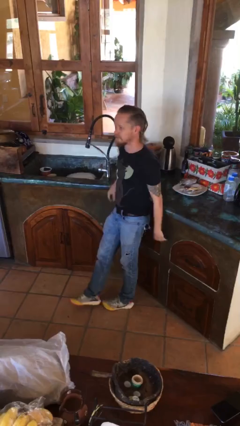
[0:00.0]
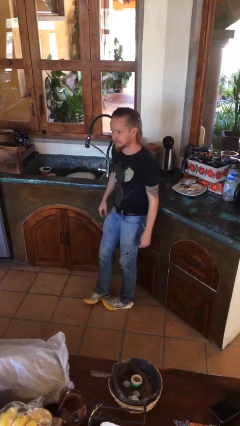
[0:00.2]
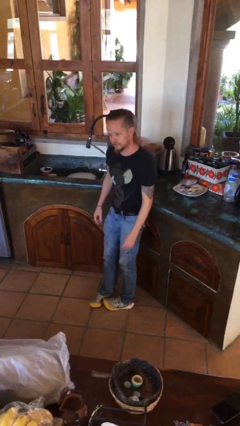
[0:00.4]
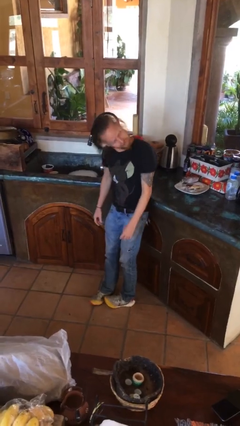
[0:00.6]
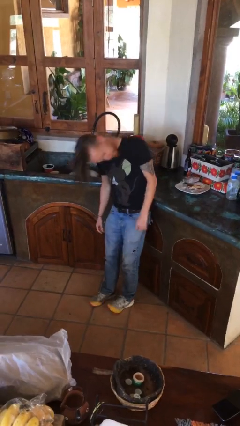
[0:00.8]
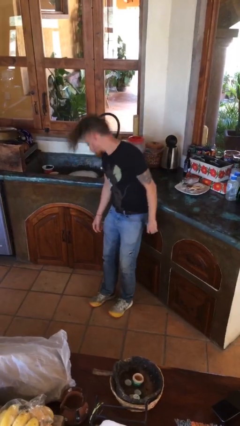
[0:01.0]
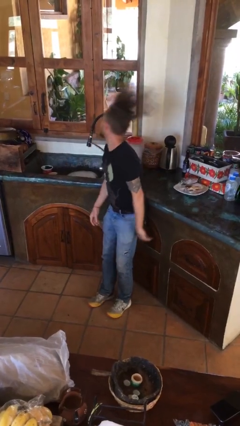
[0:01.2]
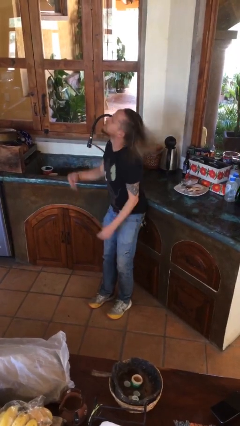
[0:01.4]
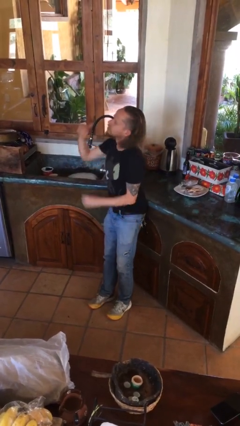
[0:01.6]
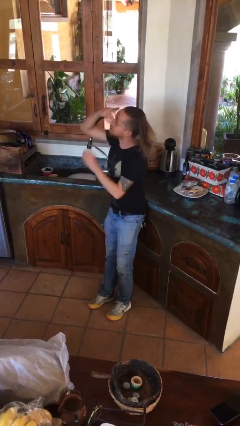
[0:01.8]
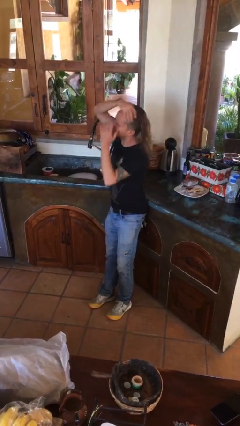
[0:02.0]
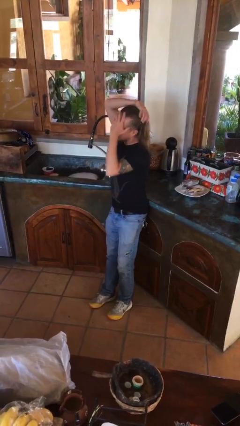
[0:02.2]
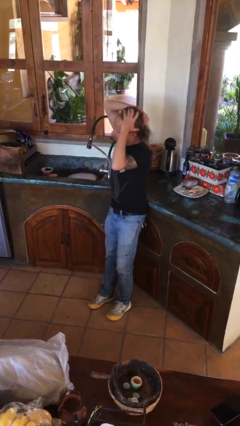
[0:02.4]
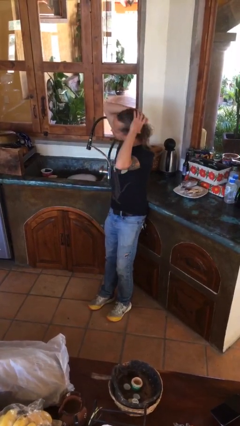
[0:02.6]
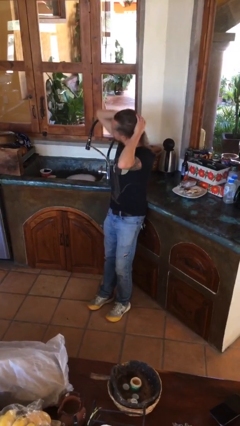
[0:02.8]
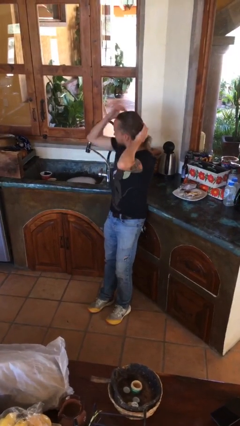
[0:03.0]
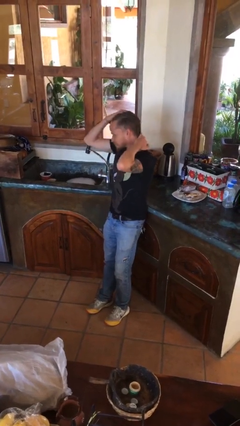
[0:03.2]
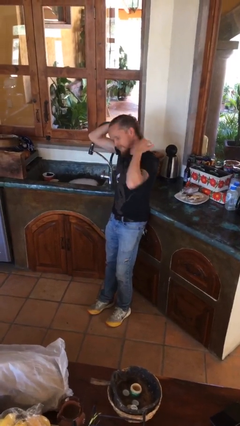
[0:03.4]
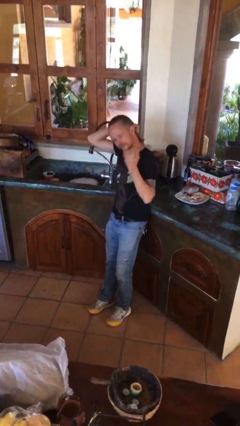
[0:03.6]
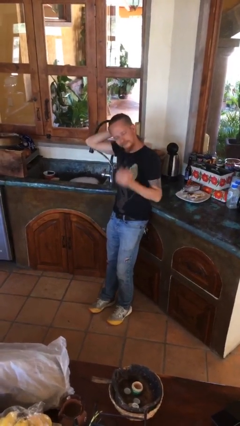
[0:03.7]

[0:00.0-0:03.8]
person strokes hair

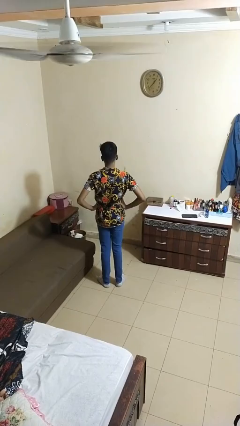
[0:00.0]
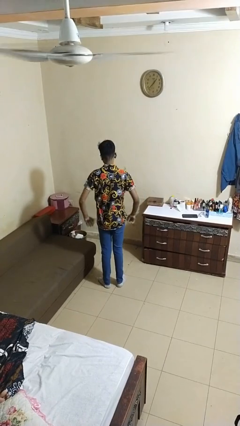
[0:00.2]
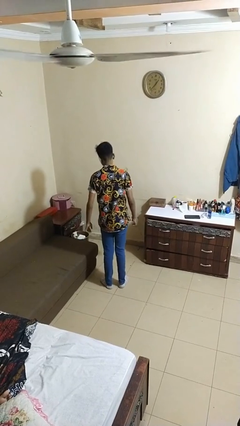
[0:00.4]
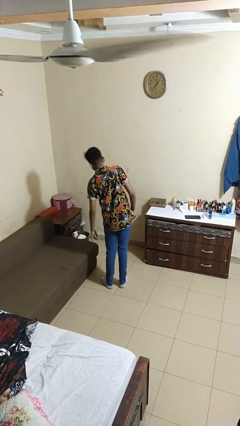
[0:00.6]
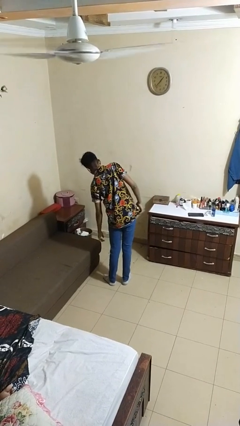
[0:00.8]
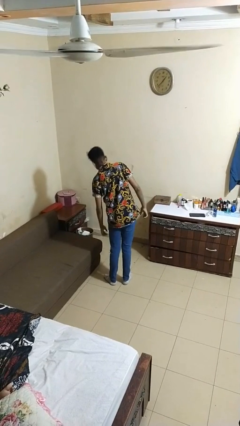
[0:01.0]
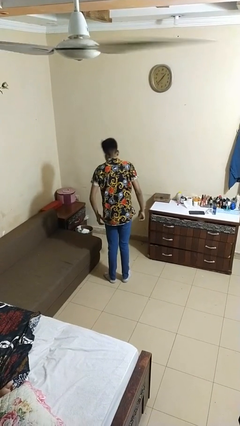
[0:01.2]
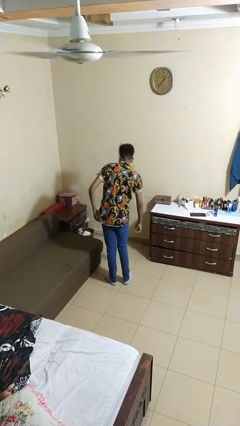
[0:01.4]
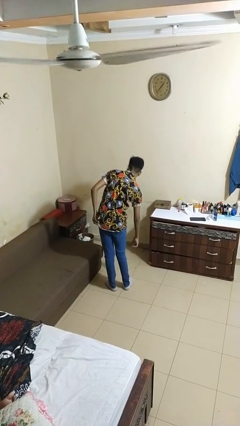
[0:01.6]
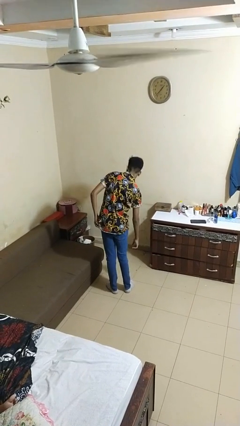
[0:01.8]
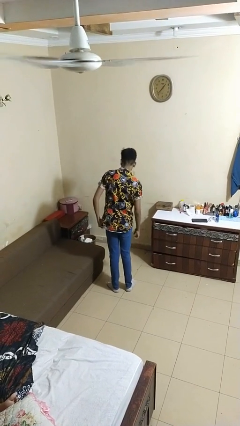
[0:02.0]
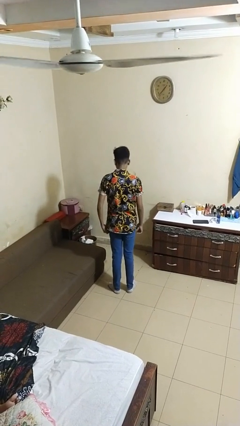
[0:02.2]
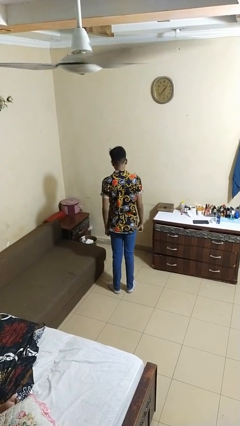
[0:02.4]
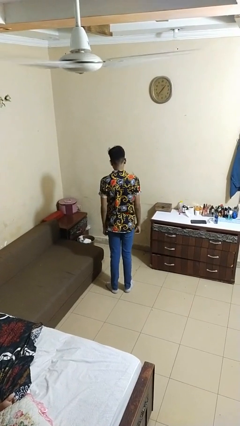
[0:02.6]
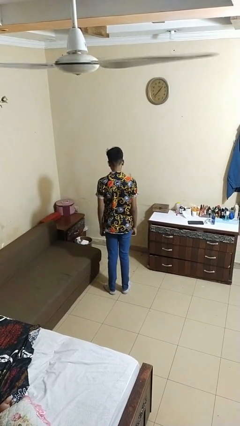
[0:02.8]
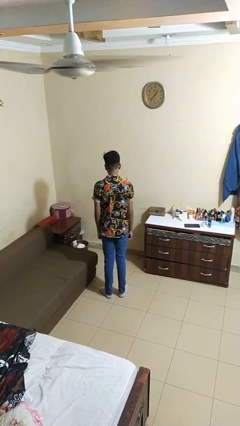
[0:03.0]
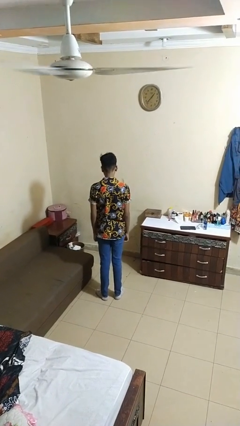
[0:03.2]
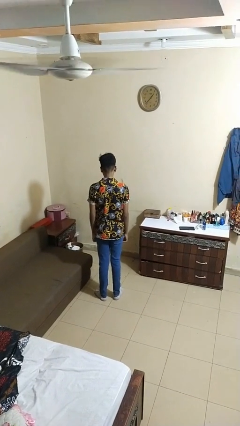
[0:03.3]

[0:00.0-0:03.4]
person stretches arms to side

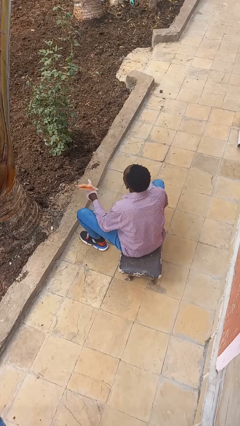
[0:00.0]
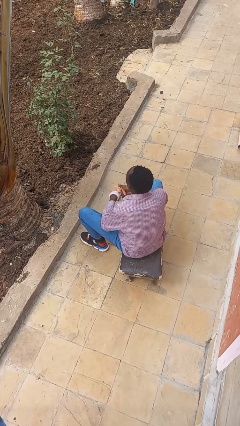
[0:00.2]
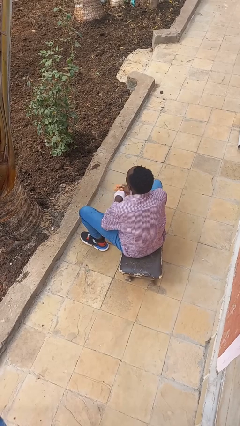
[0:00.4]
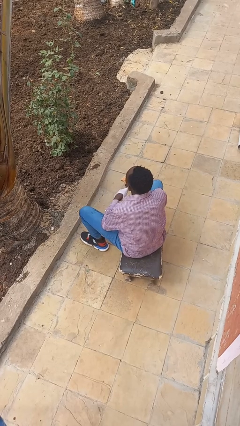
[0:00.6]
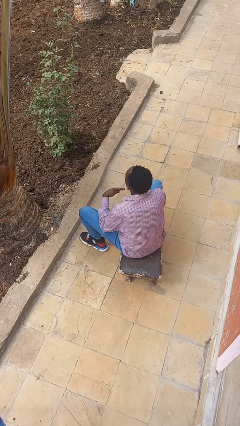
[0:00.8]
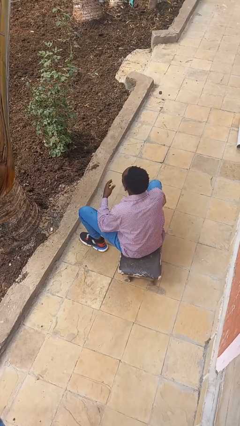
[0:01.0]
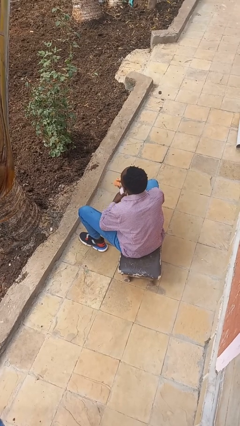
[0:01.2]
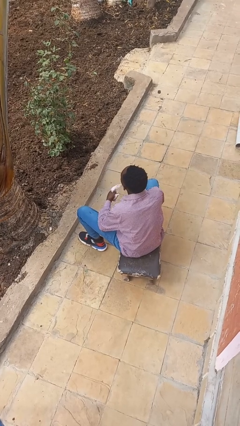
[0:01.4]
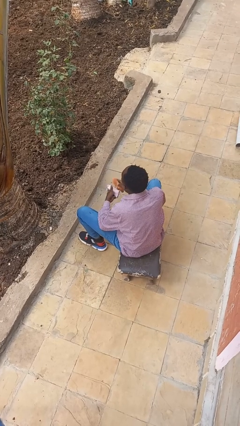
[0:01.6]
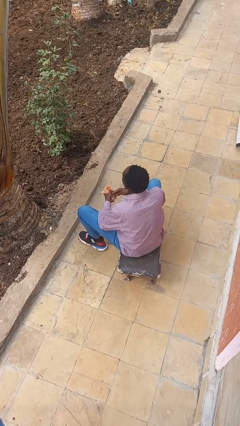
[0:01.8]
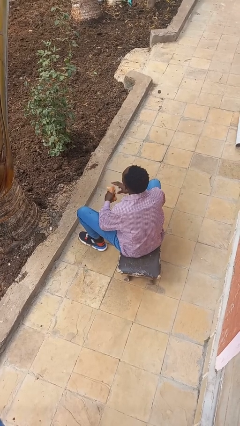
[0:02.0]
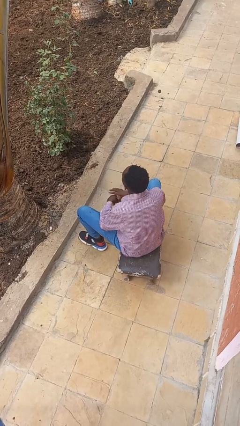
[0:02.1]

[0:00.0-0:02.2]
person takes off gloves

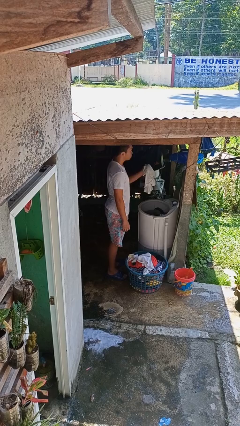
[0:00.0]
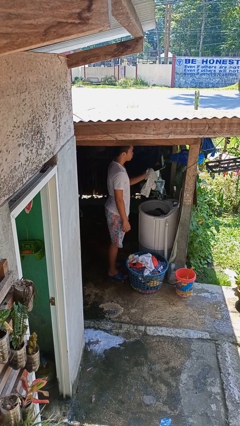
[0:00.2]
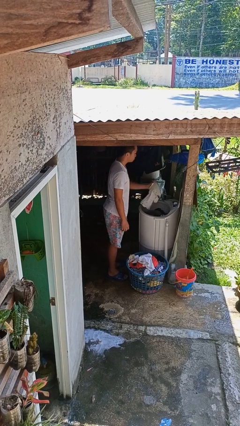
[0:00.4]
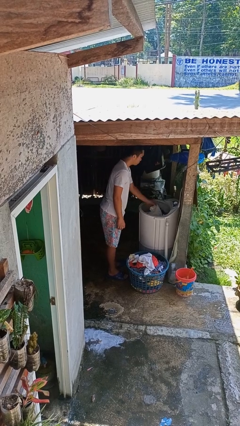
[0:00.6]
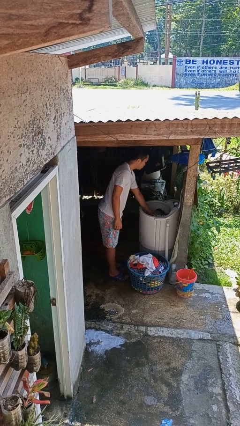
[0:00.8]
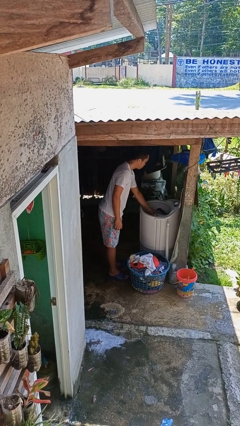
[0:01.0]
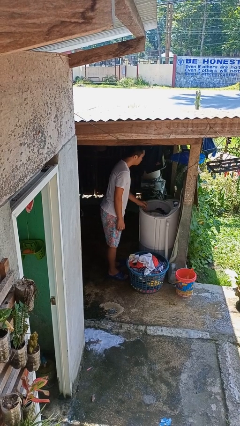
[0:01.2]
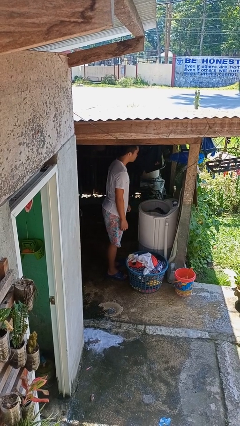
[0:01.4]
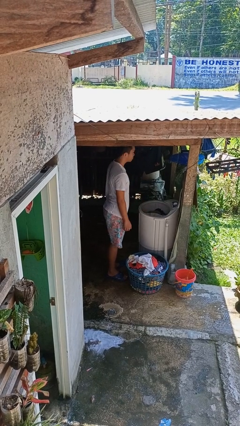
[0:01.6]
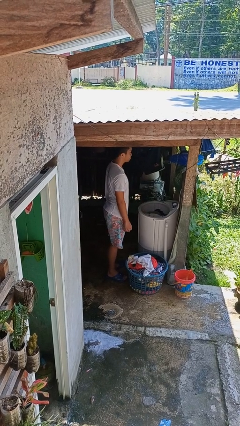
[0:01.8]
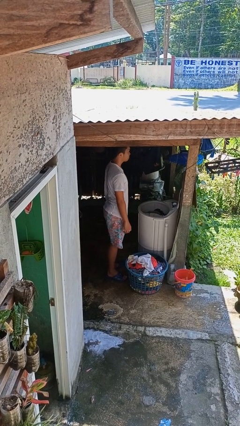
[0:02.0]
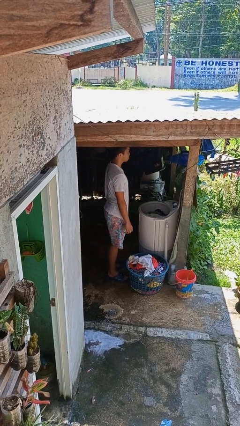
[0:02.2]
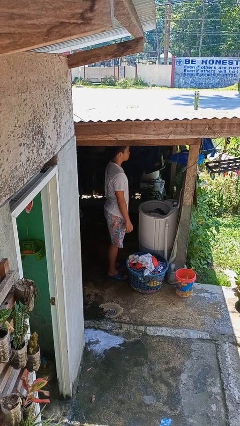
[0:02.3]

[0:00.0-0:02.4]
person loads clotheswasher

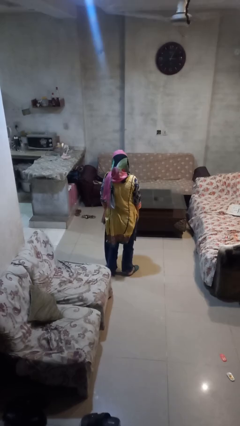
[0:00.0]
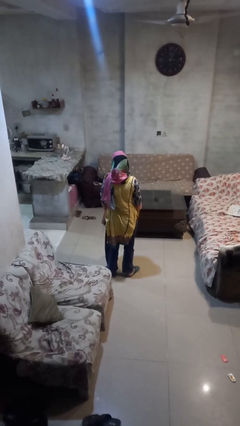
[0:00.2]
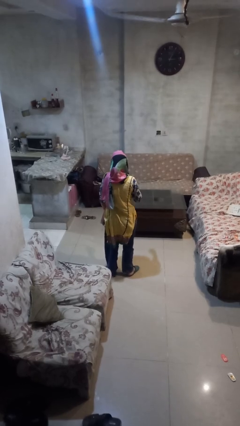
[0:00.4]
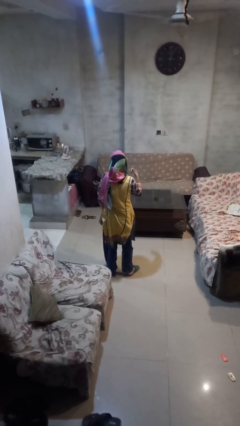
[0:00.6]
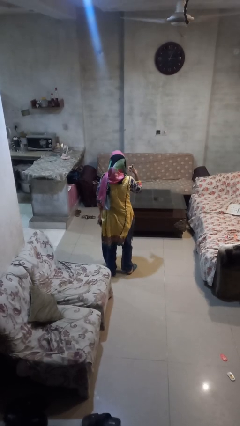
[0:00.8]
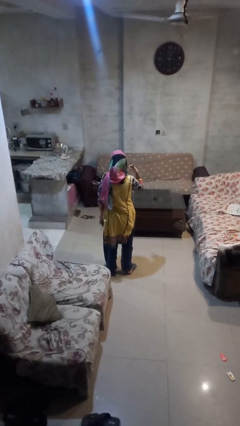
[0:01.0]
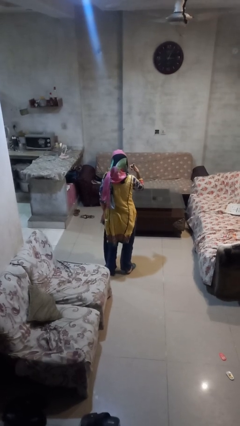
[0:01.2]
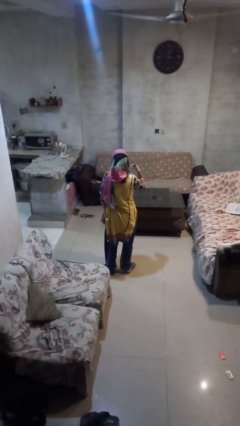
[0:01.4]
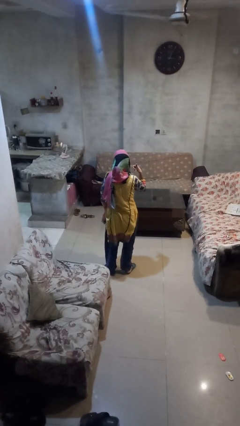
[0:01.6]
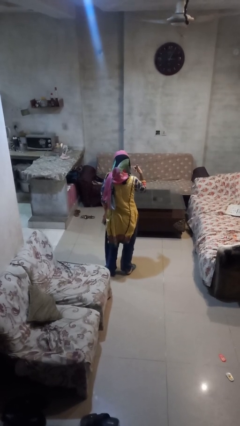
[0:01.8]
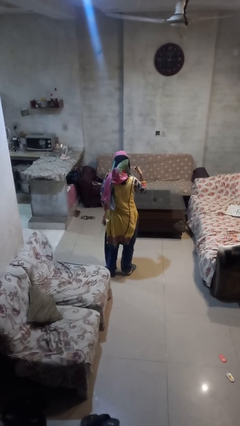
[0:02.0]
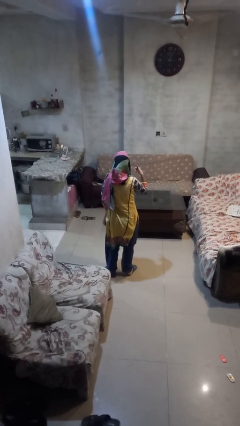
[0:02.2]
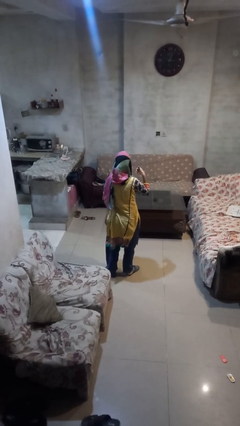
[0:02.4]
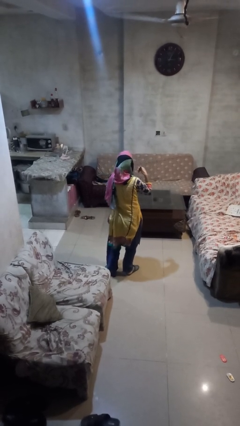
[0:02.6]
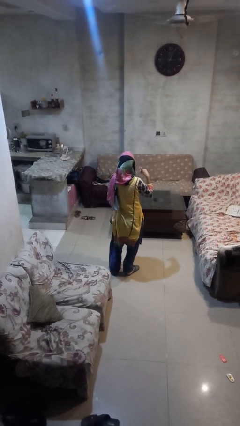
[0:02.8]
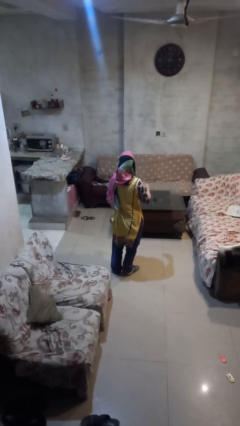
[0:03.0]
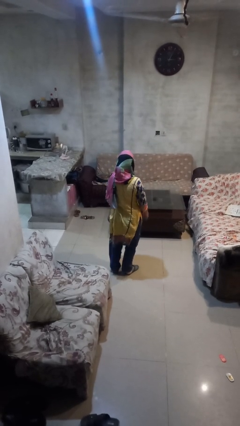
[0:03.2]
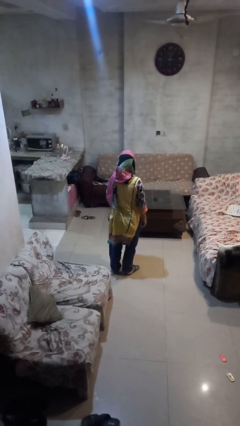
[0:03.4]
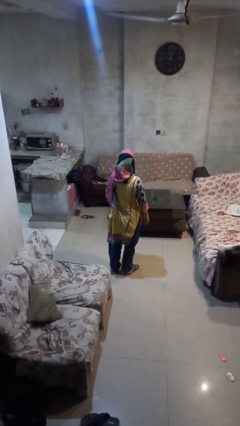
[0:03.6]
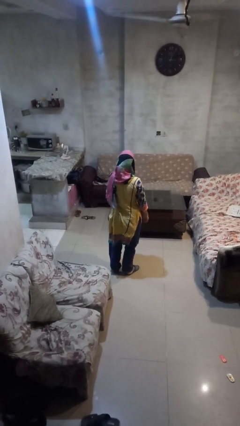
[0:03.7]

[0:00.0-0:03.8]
person gestures call me

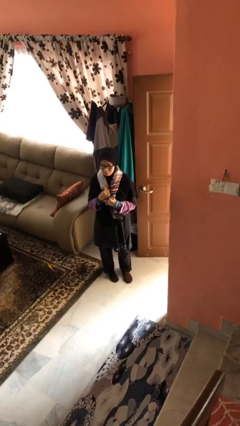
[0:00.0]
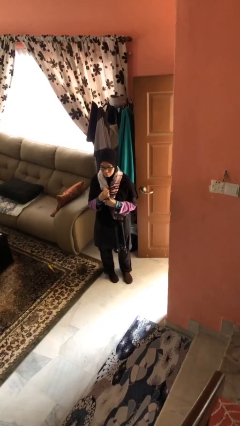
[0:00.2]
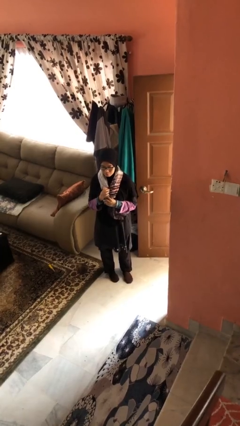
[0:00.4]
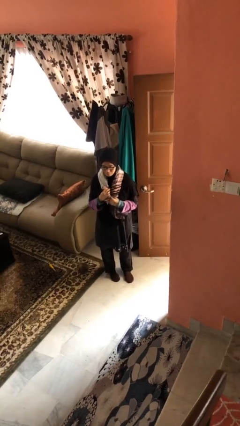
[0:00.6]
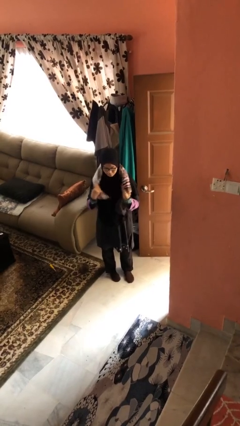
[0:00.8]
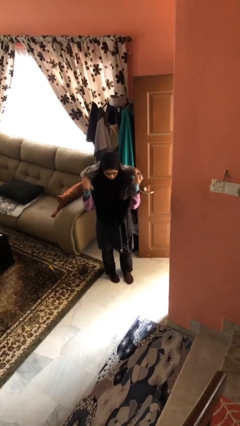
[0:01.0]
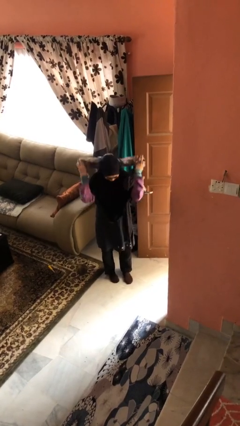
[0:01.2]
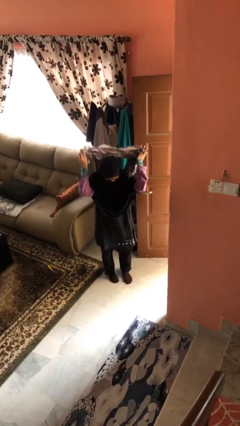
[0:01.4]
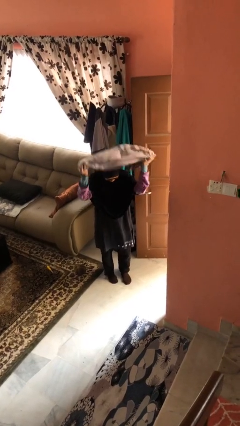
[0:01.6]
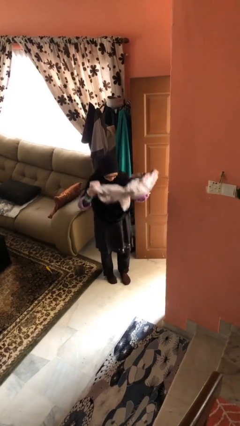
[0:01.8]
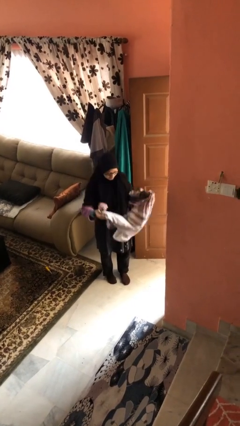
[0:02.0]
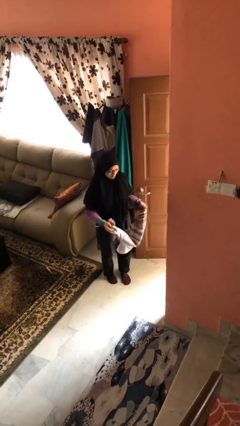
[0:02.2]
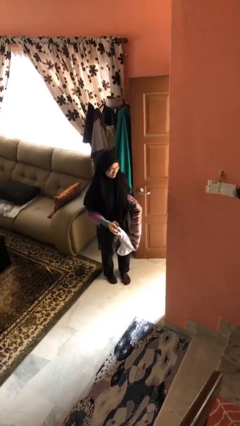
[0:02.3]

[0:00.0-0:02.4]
person takes off scarf
